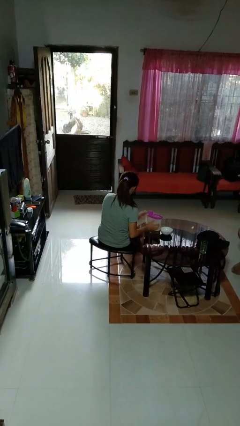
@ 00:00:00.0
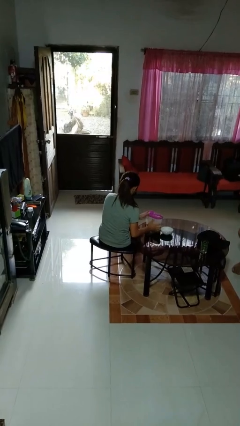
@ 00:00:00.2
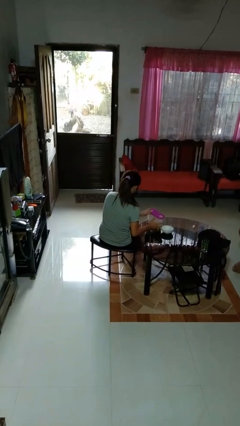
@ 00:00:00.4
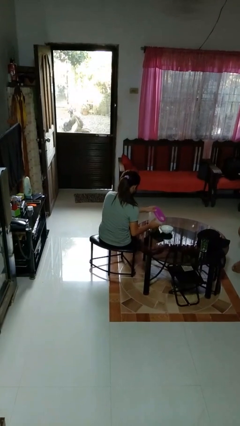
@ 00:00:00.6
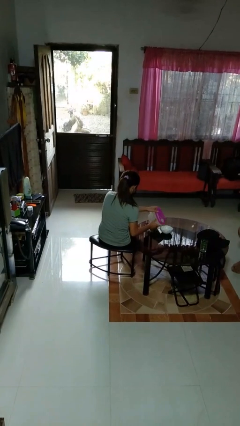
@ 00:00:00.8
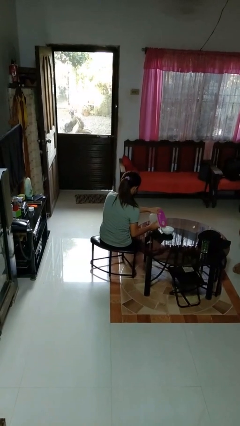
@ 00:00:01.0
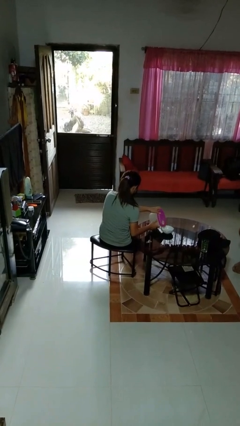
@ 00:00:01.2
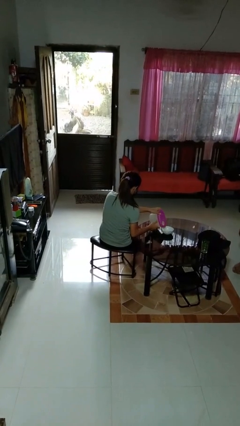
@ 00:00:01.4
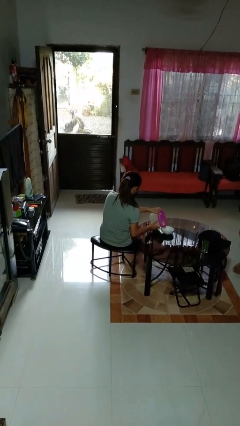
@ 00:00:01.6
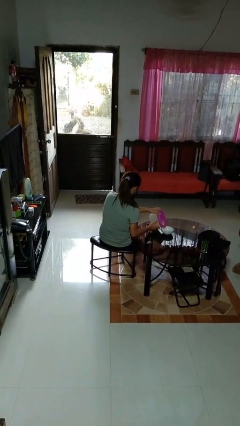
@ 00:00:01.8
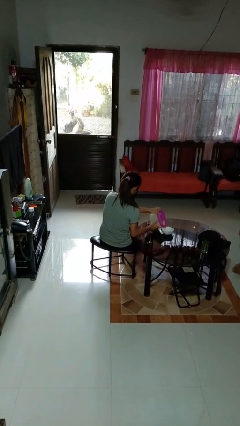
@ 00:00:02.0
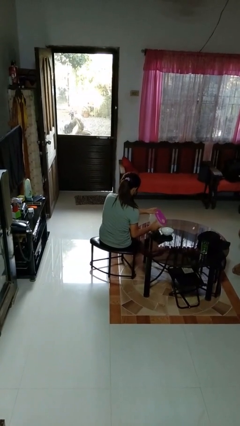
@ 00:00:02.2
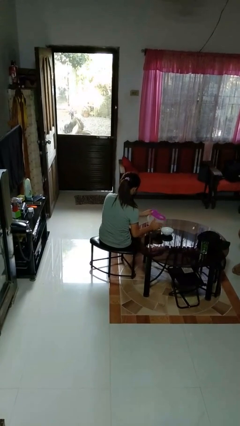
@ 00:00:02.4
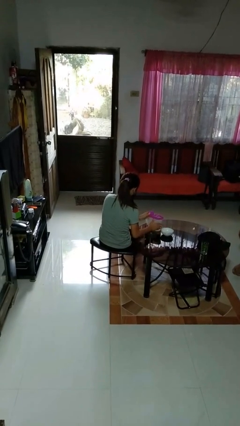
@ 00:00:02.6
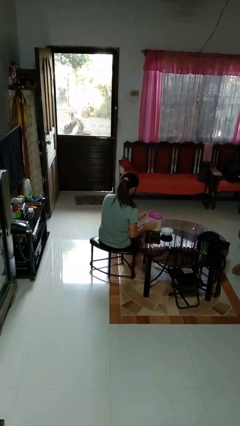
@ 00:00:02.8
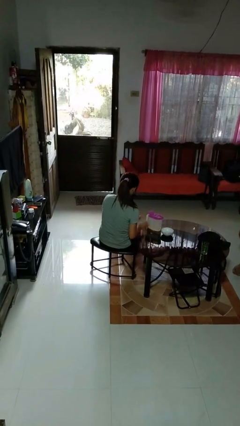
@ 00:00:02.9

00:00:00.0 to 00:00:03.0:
person pours into bowl

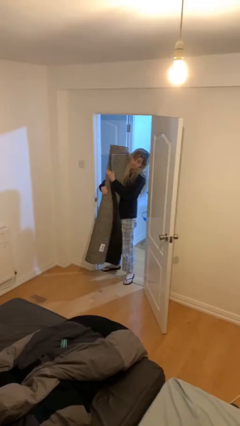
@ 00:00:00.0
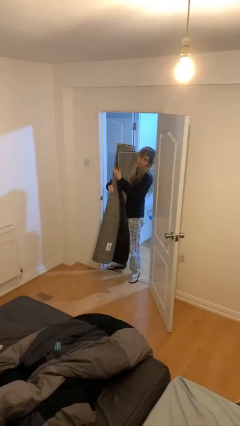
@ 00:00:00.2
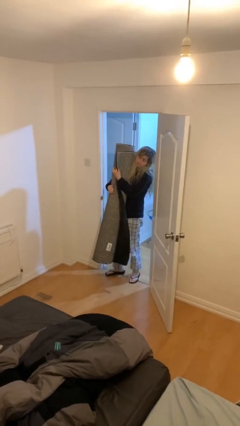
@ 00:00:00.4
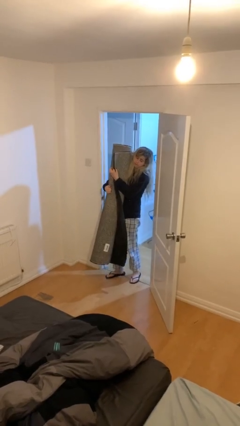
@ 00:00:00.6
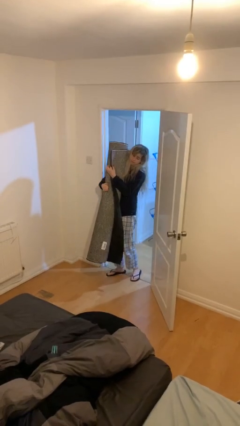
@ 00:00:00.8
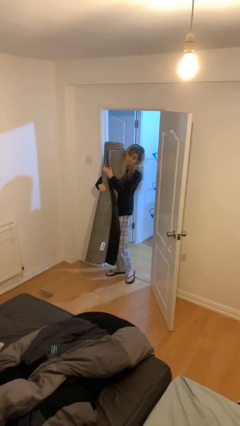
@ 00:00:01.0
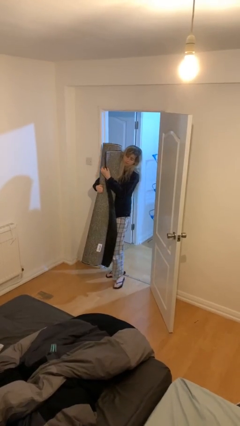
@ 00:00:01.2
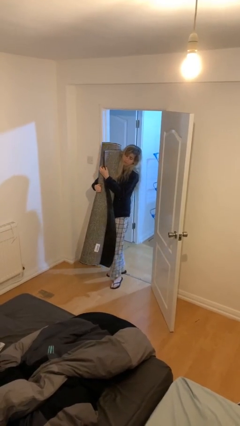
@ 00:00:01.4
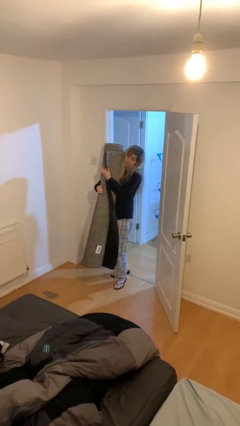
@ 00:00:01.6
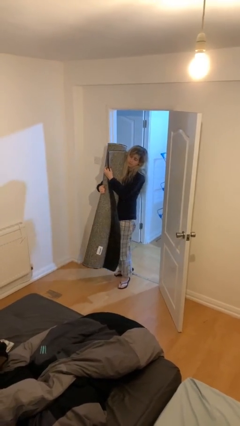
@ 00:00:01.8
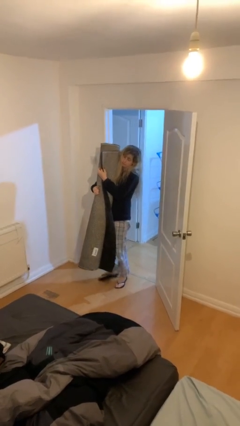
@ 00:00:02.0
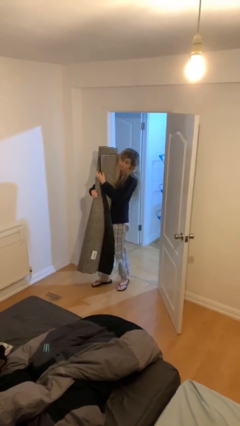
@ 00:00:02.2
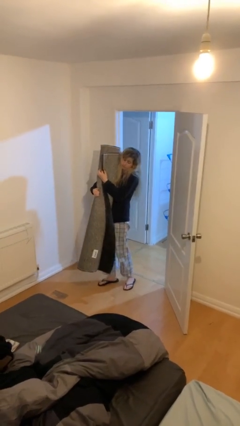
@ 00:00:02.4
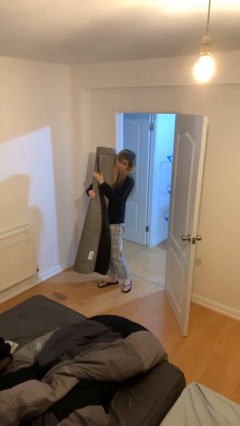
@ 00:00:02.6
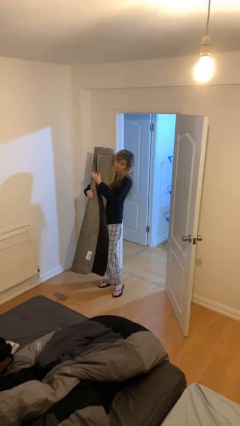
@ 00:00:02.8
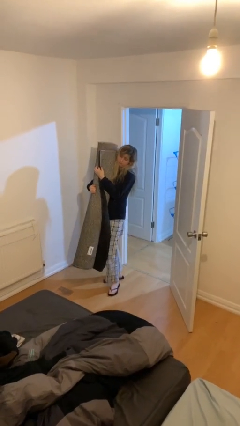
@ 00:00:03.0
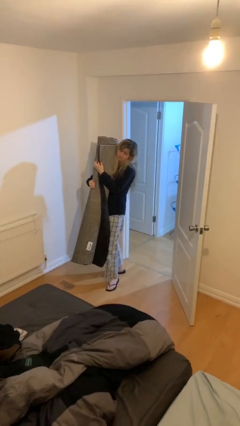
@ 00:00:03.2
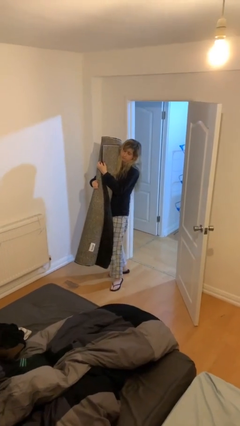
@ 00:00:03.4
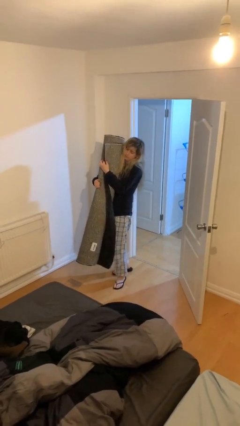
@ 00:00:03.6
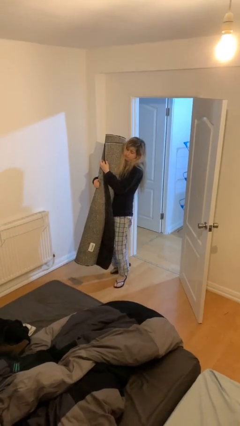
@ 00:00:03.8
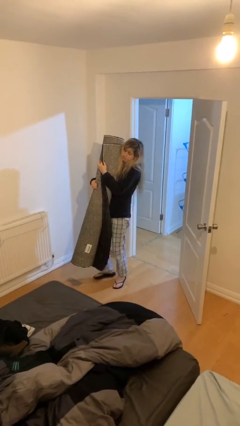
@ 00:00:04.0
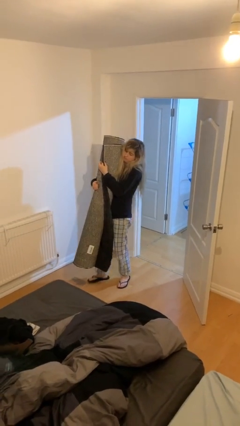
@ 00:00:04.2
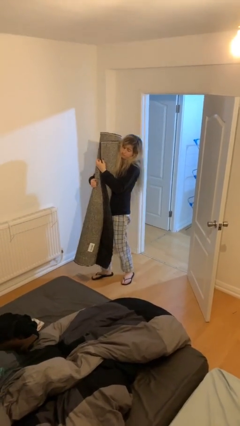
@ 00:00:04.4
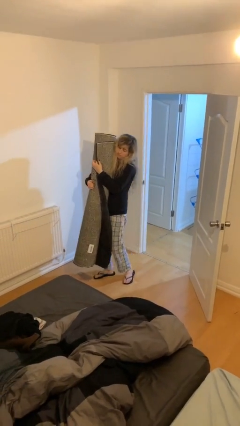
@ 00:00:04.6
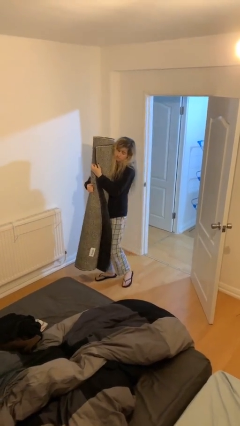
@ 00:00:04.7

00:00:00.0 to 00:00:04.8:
person carries heavy object

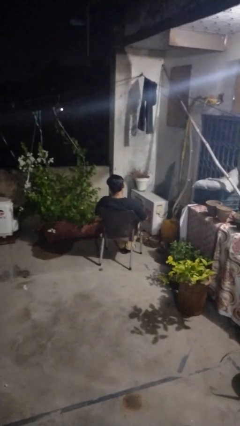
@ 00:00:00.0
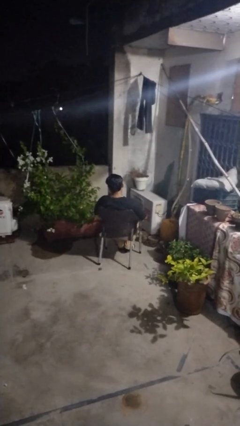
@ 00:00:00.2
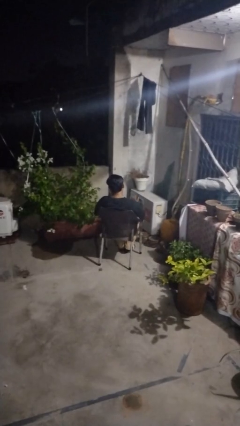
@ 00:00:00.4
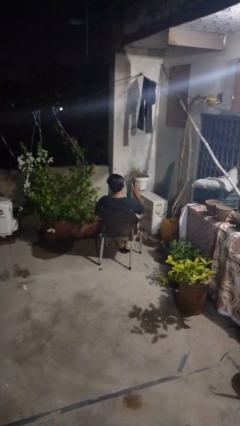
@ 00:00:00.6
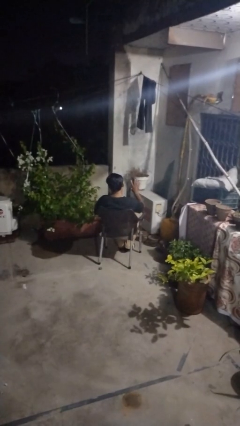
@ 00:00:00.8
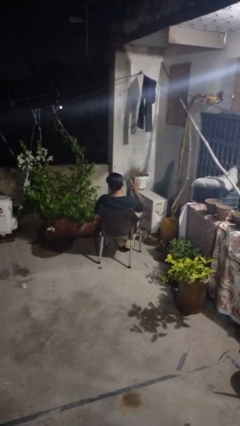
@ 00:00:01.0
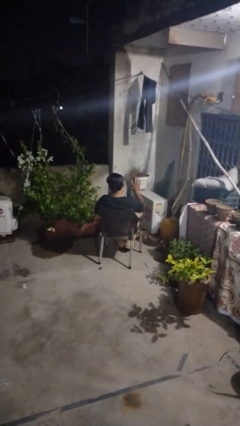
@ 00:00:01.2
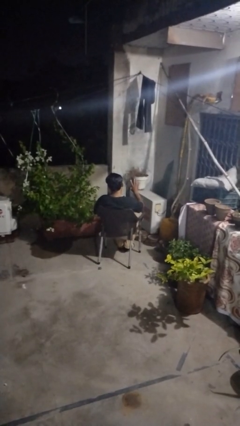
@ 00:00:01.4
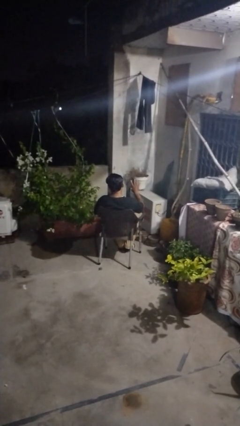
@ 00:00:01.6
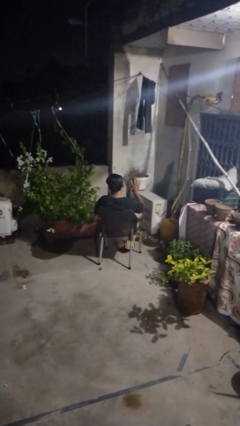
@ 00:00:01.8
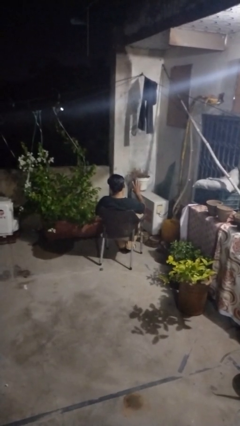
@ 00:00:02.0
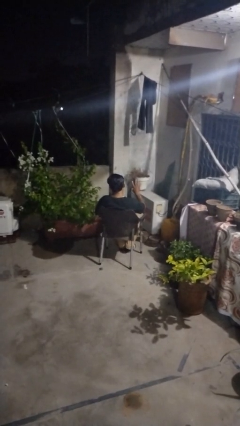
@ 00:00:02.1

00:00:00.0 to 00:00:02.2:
person gestures number four

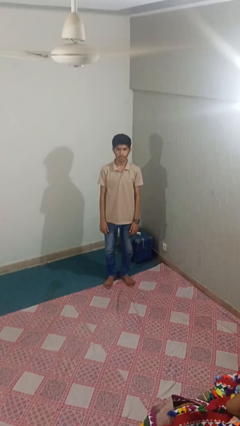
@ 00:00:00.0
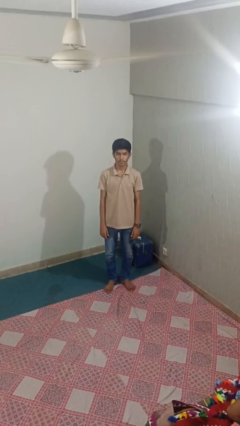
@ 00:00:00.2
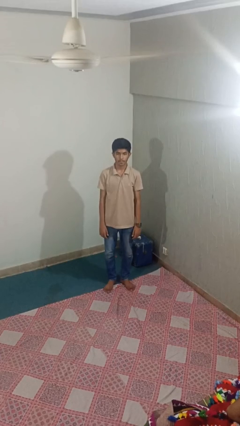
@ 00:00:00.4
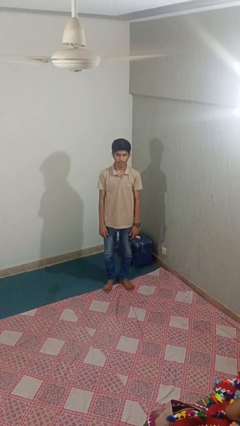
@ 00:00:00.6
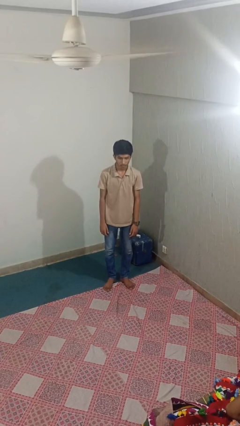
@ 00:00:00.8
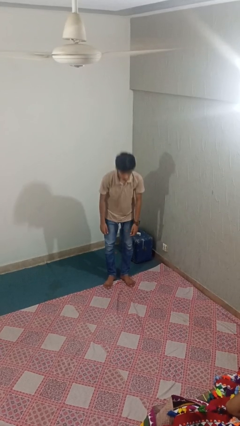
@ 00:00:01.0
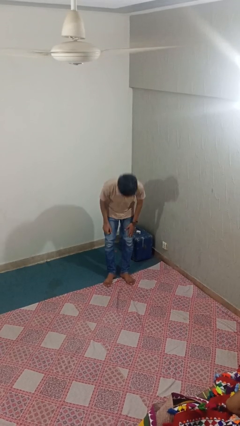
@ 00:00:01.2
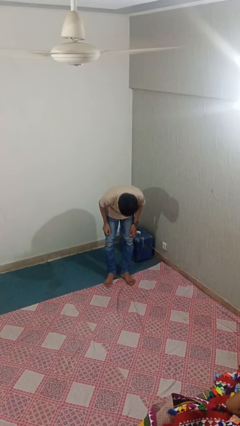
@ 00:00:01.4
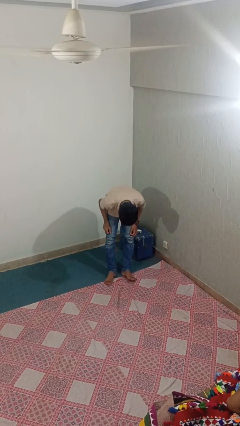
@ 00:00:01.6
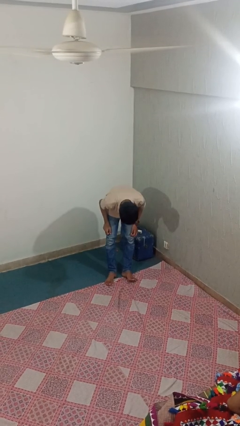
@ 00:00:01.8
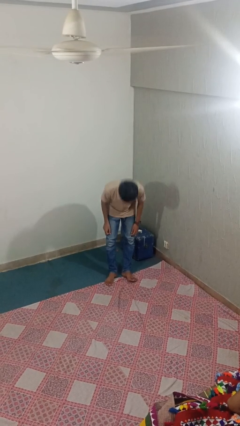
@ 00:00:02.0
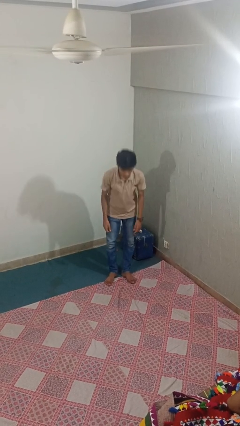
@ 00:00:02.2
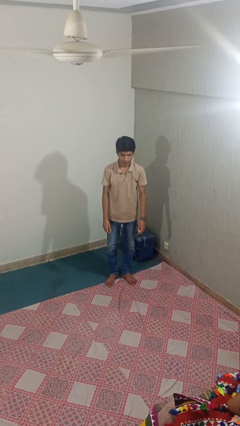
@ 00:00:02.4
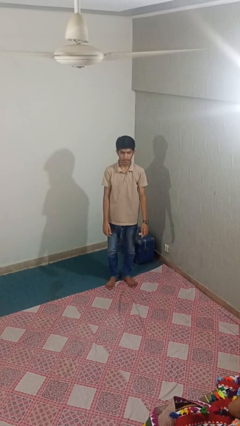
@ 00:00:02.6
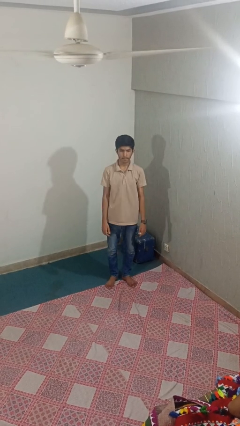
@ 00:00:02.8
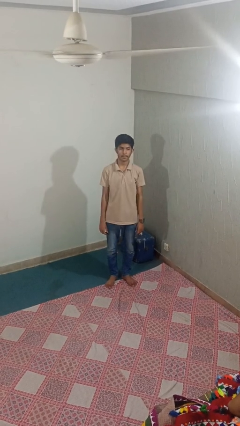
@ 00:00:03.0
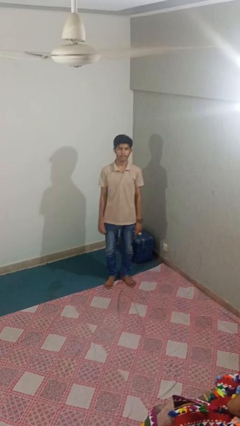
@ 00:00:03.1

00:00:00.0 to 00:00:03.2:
person bows

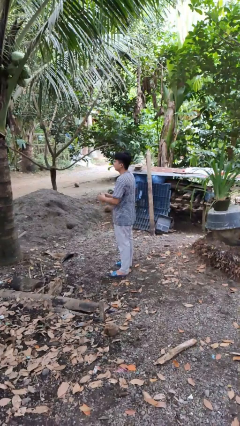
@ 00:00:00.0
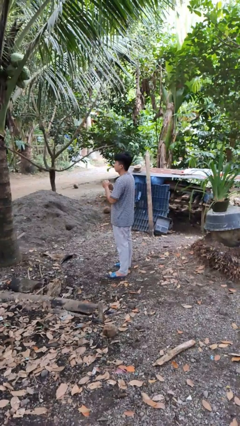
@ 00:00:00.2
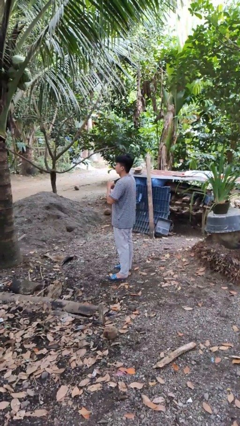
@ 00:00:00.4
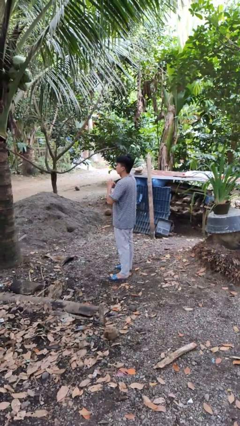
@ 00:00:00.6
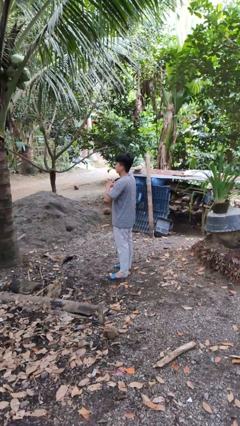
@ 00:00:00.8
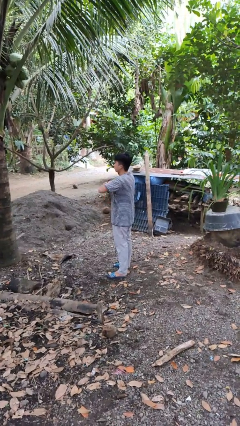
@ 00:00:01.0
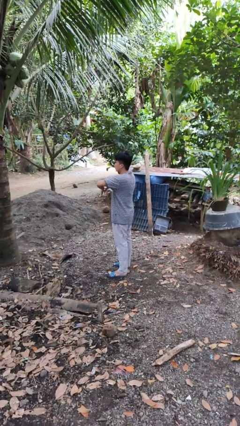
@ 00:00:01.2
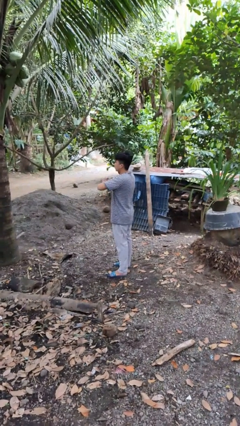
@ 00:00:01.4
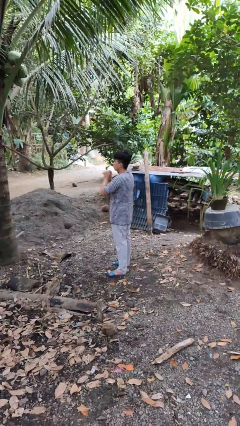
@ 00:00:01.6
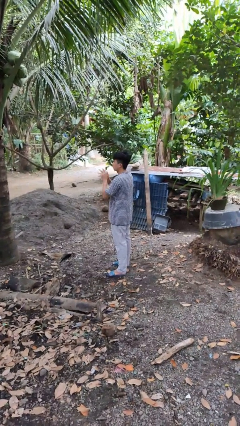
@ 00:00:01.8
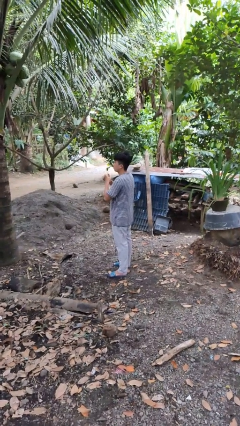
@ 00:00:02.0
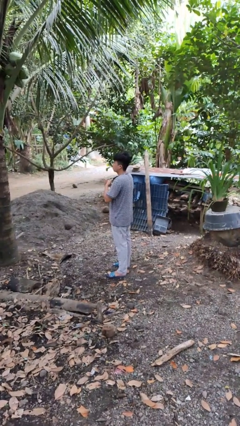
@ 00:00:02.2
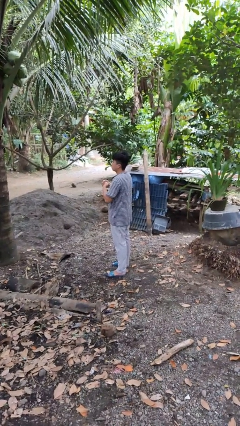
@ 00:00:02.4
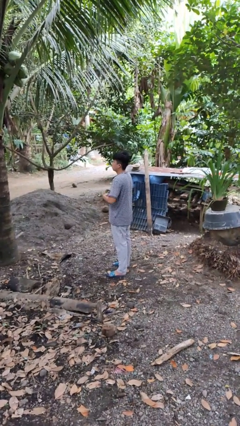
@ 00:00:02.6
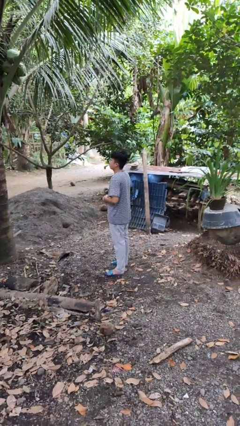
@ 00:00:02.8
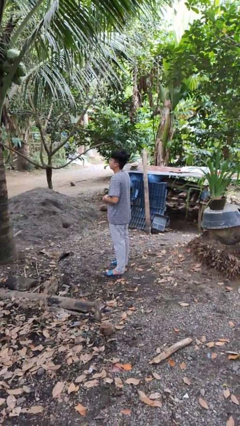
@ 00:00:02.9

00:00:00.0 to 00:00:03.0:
person cracks knuckles

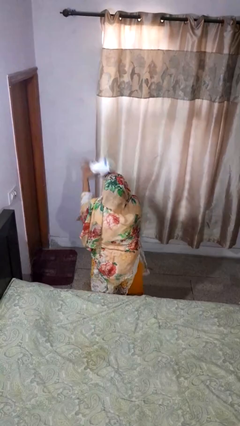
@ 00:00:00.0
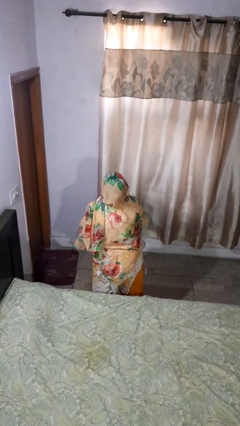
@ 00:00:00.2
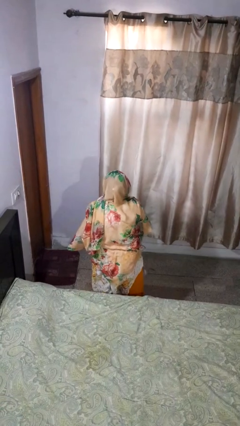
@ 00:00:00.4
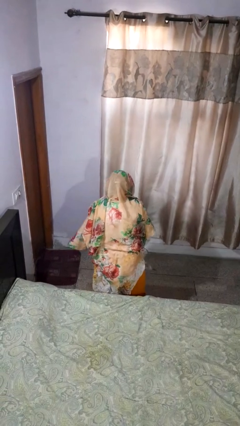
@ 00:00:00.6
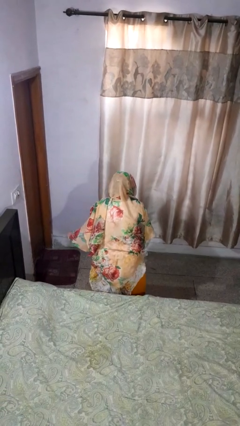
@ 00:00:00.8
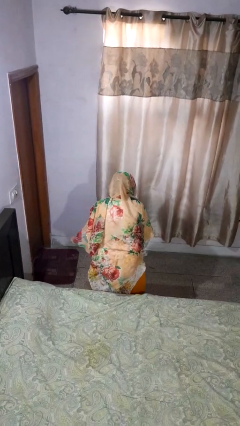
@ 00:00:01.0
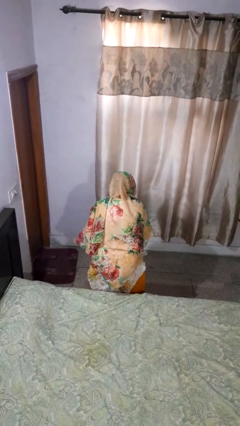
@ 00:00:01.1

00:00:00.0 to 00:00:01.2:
person catches dropped object
